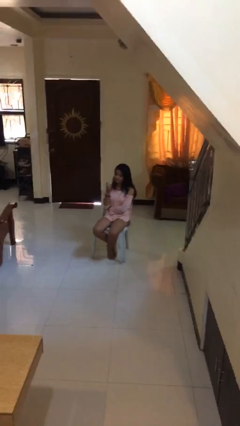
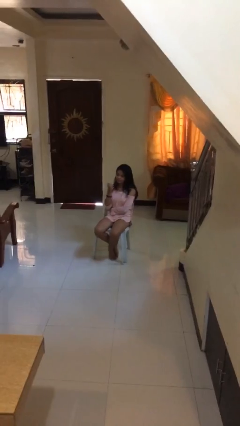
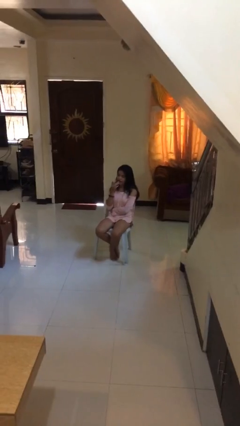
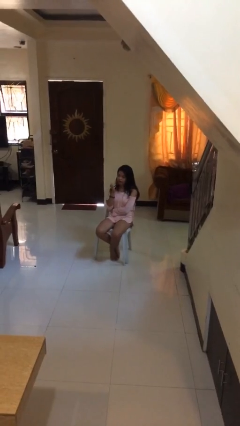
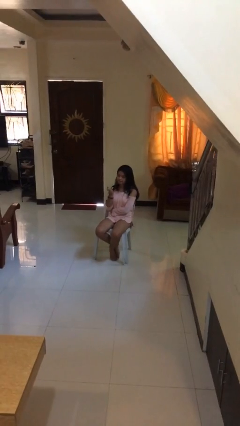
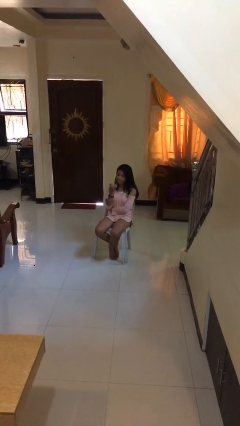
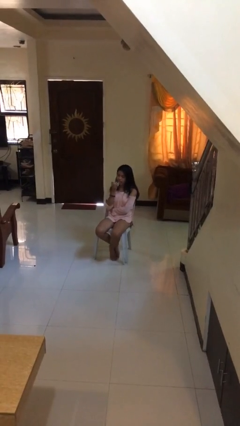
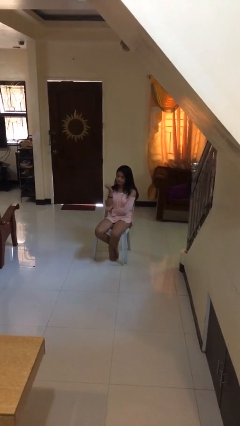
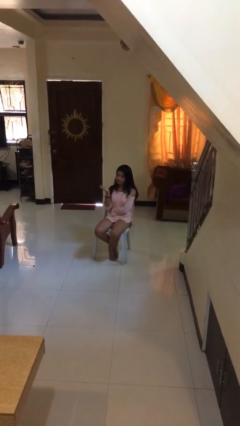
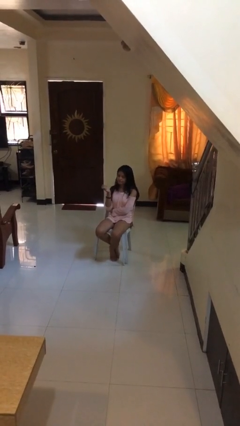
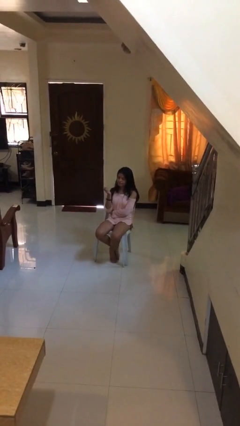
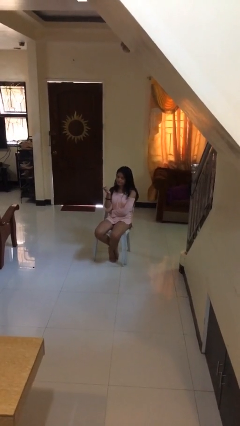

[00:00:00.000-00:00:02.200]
person licks fingers

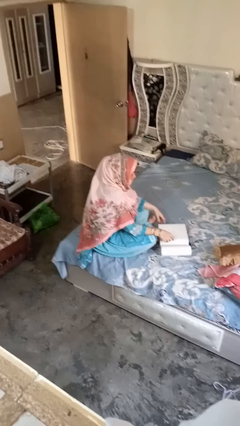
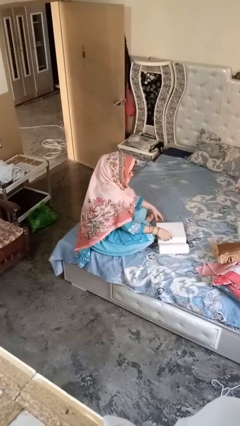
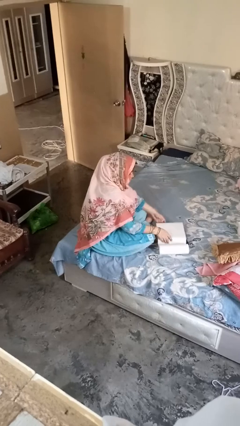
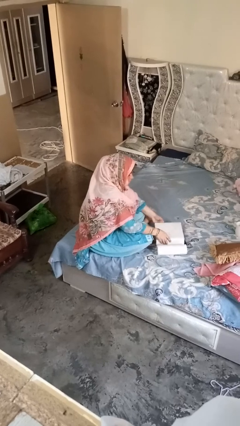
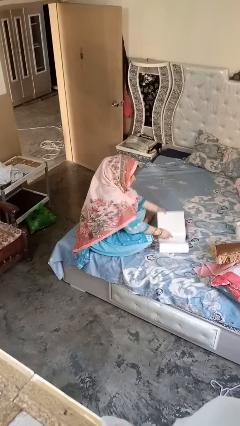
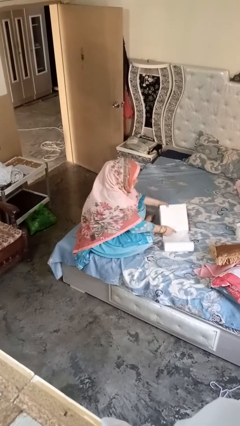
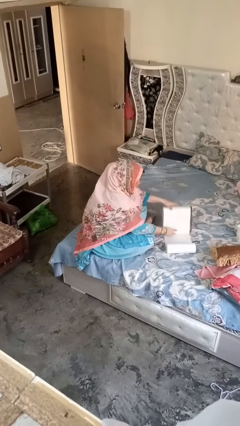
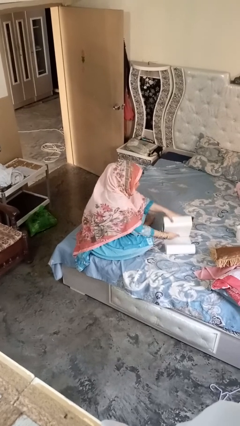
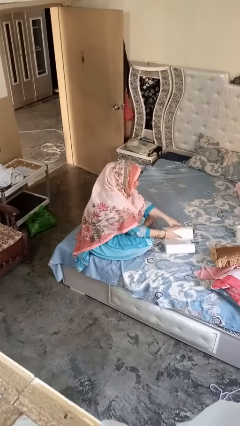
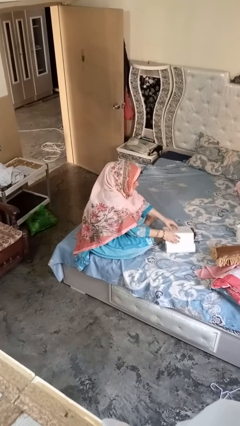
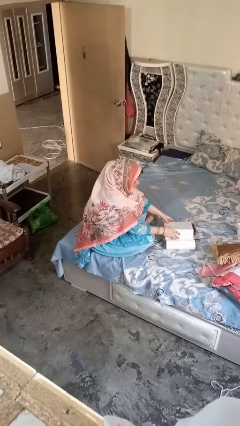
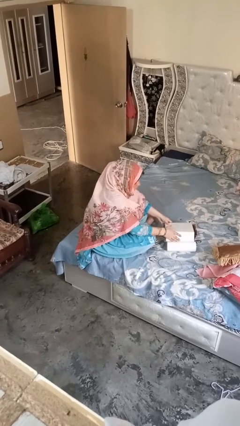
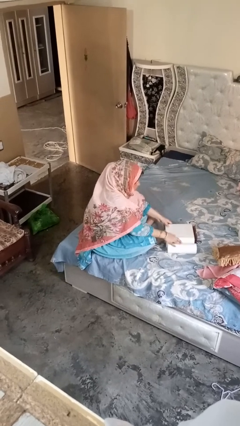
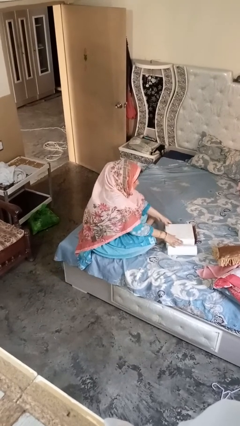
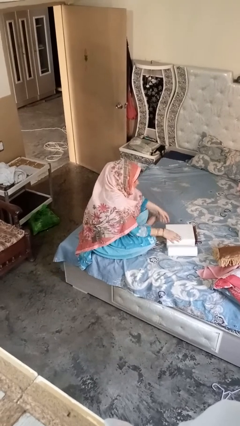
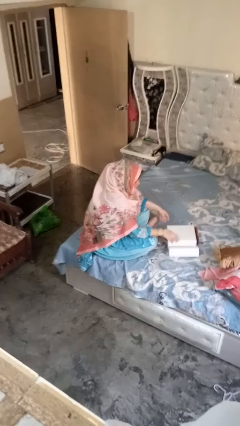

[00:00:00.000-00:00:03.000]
person wraps box

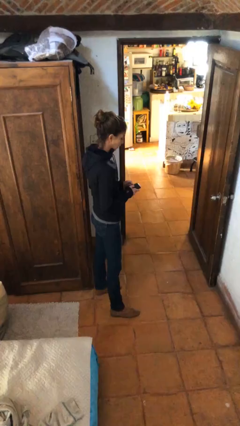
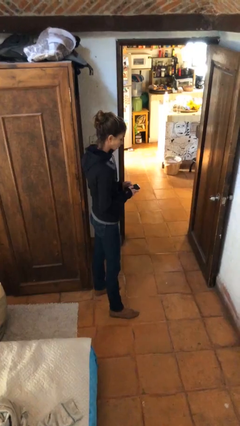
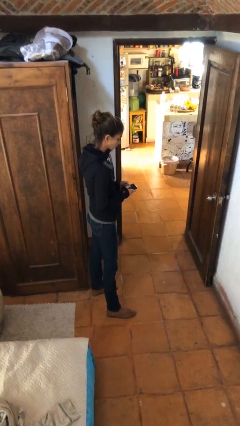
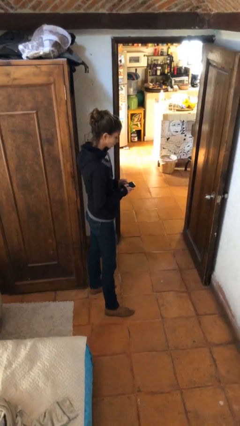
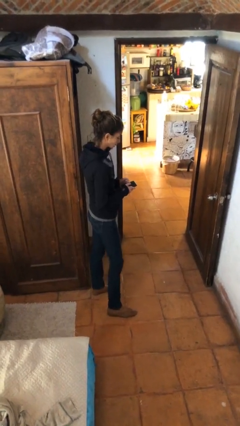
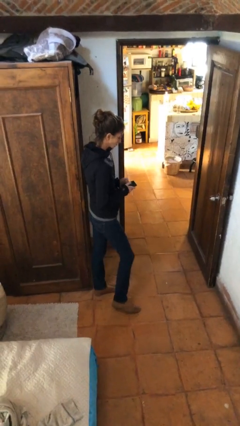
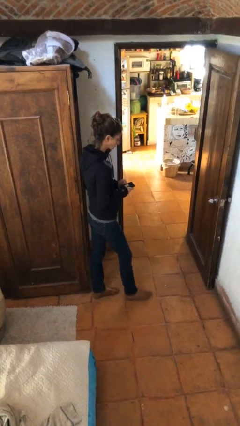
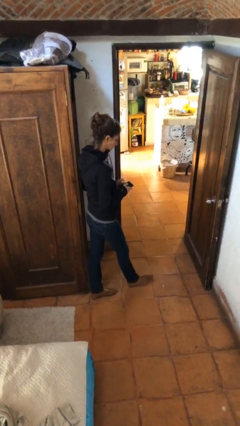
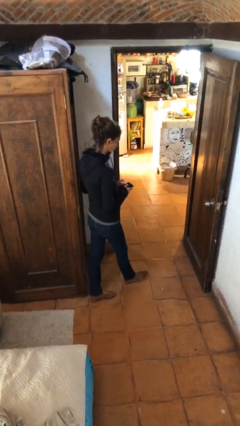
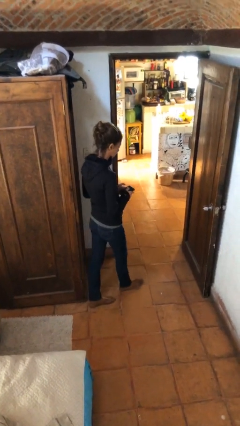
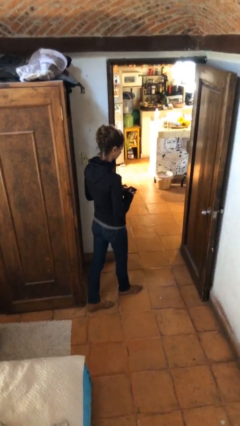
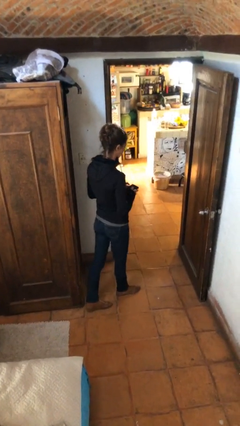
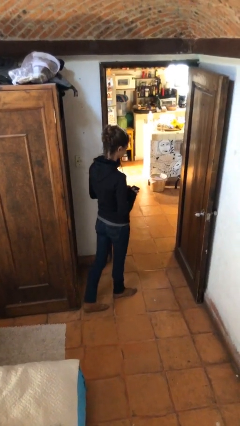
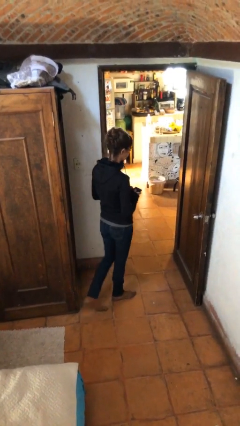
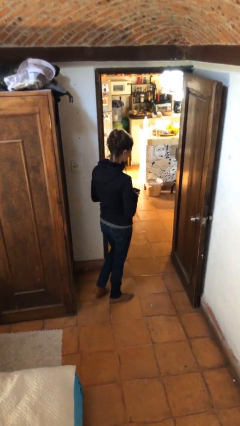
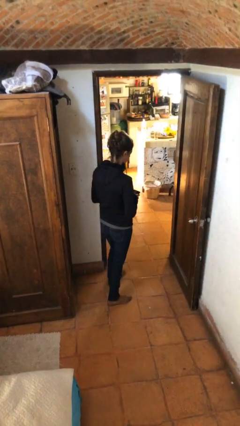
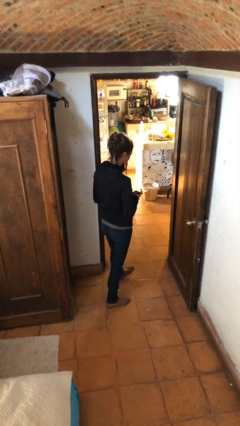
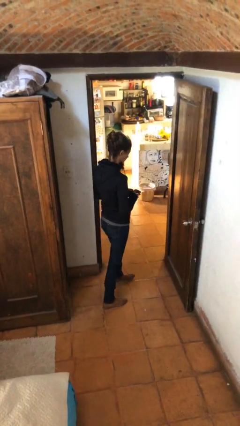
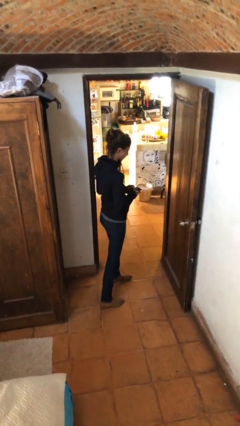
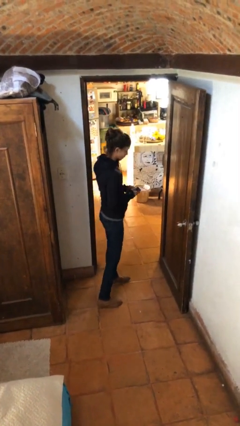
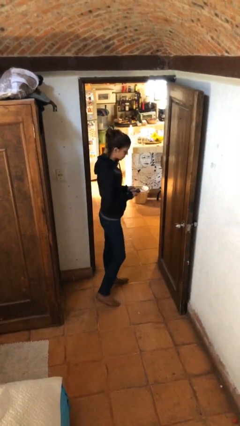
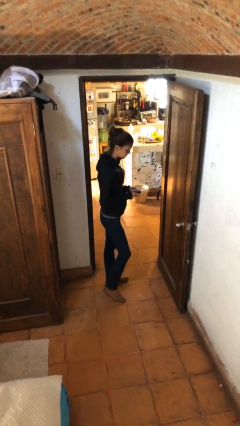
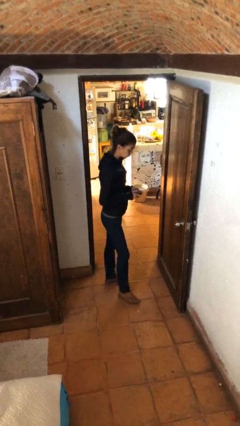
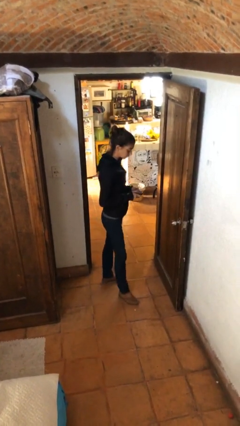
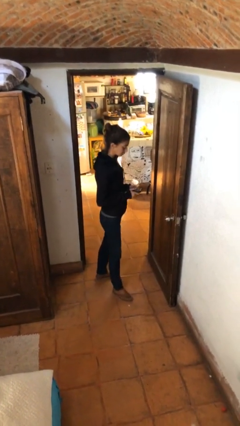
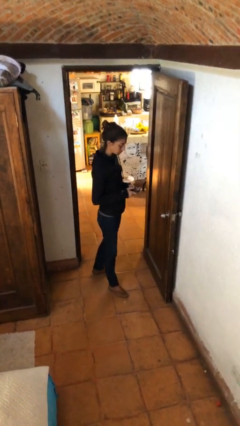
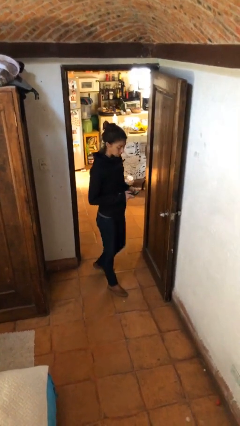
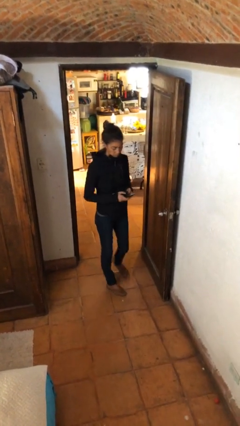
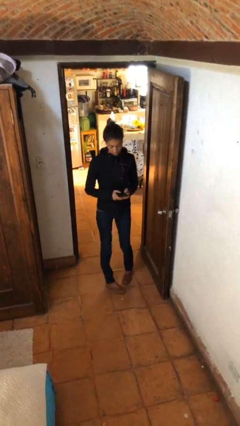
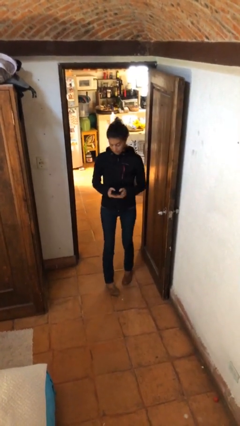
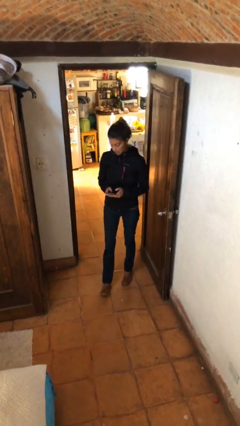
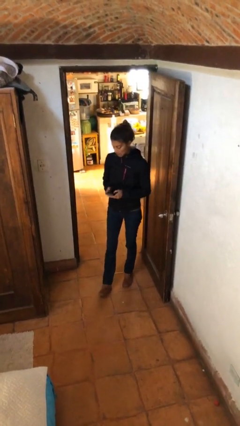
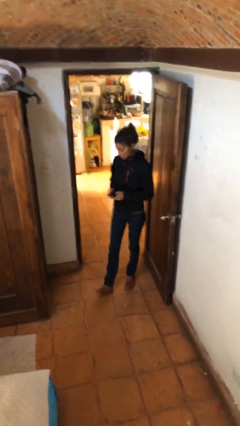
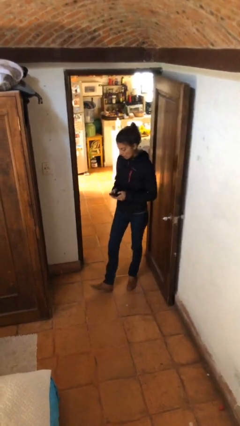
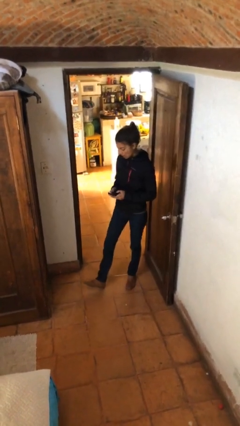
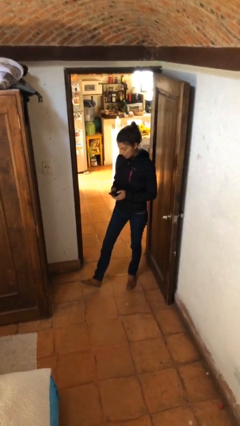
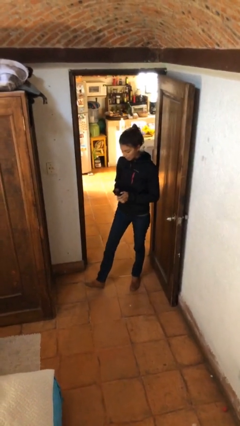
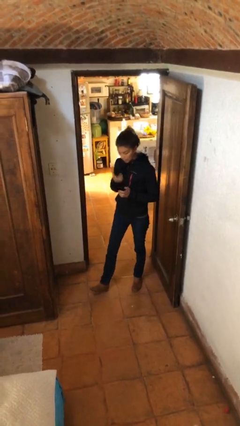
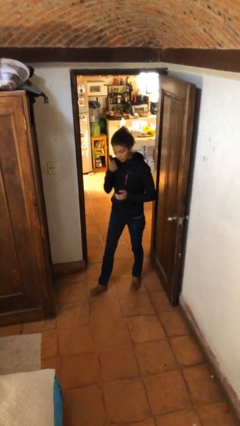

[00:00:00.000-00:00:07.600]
person texts on phone

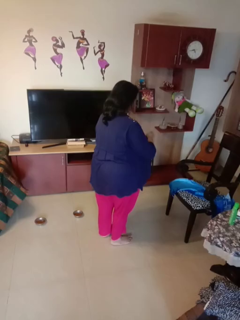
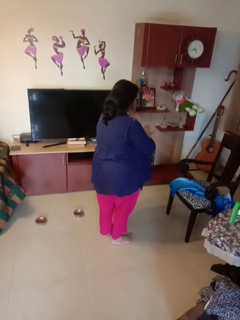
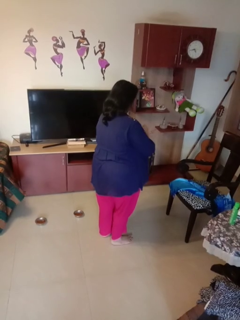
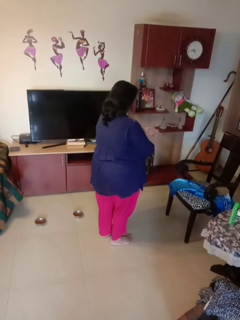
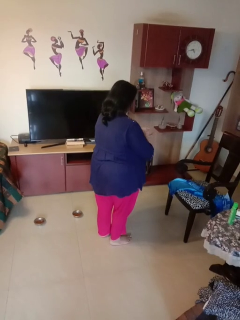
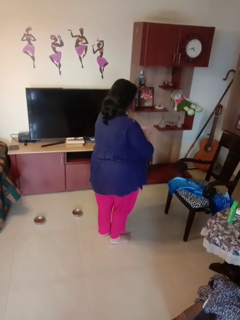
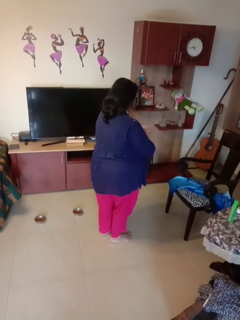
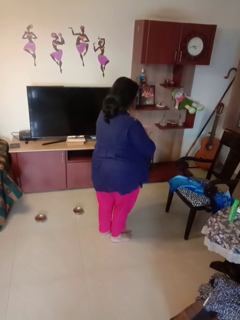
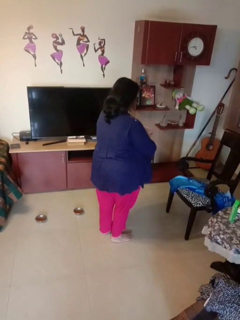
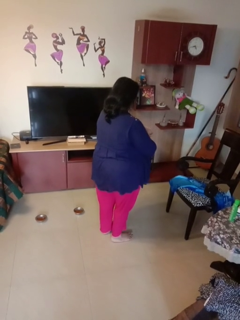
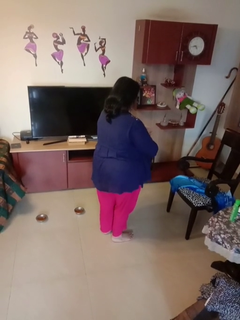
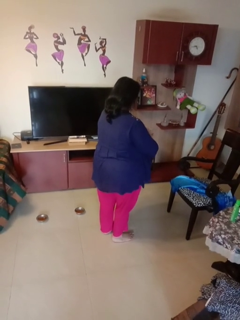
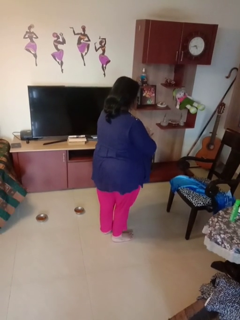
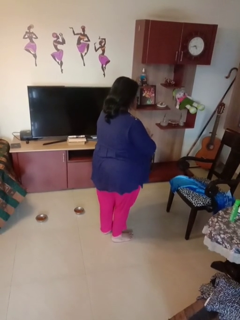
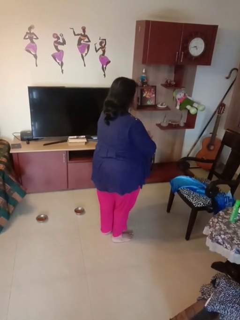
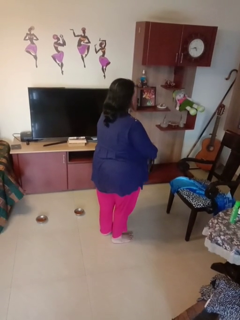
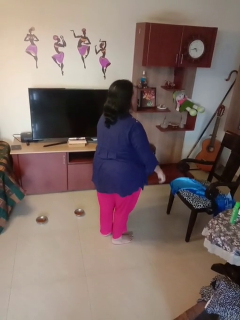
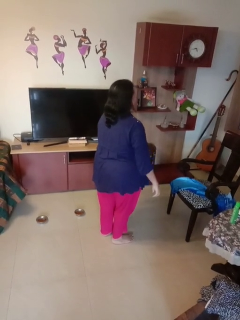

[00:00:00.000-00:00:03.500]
person puts on wristwatch

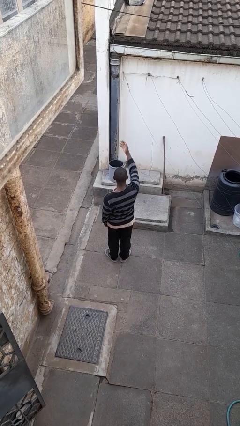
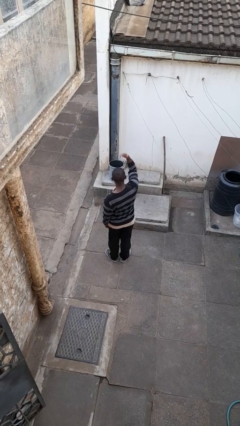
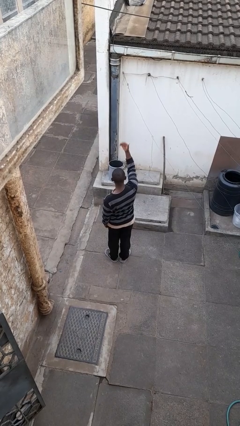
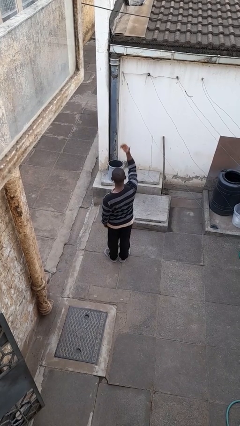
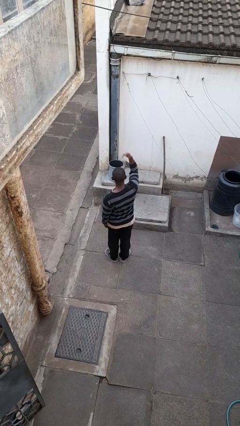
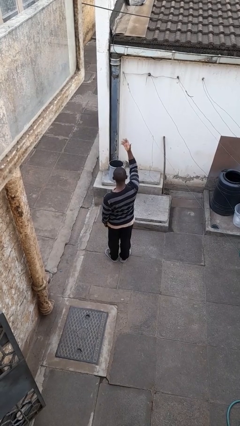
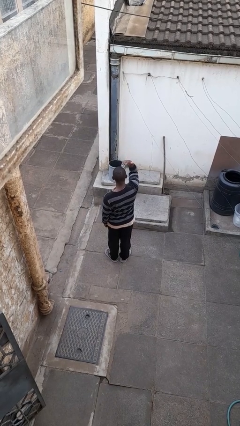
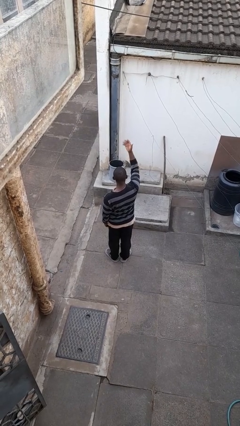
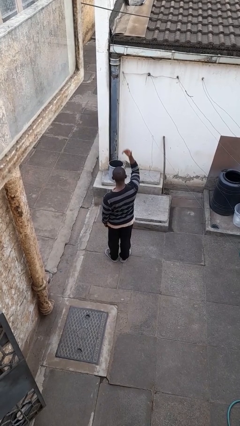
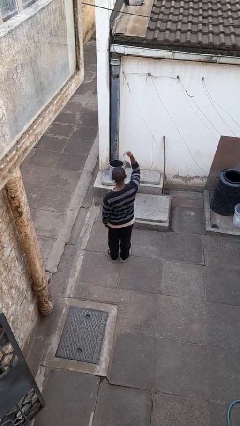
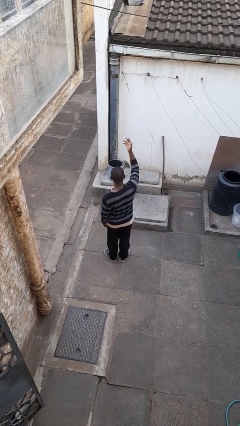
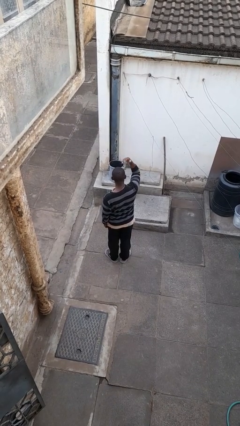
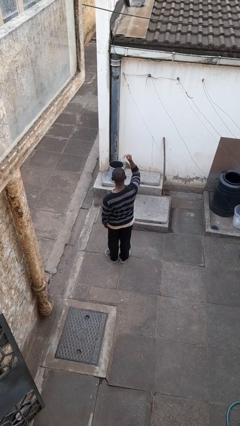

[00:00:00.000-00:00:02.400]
person gestures come here

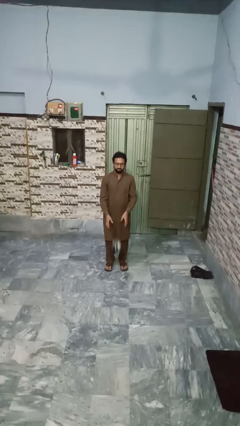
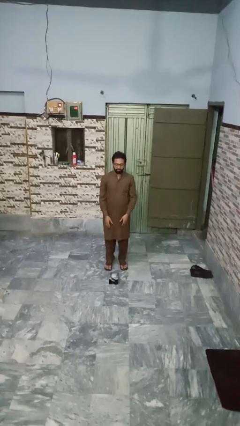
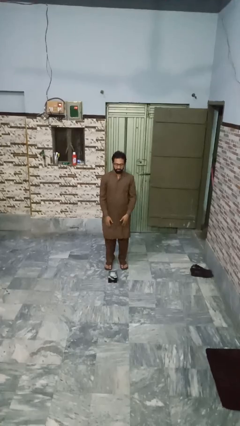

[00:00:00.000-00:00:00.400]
person catches dropped object
